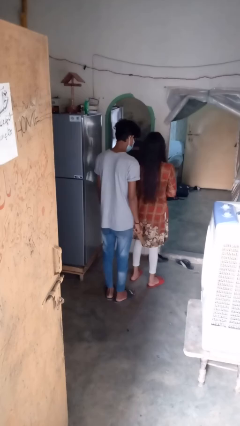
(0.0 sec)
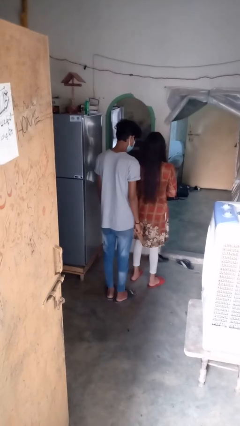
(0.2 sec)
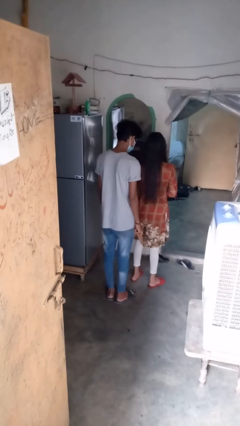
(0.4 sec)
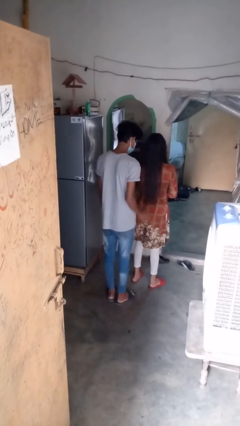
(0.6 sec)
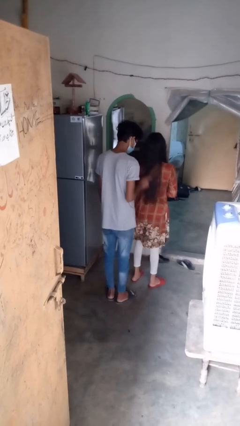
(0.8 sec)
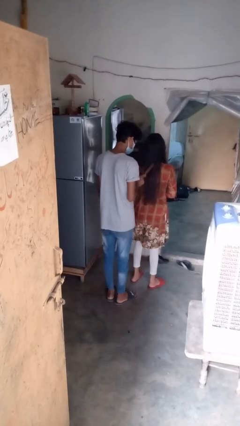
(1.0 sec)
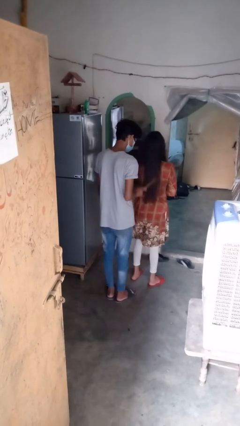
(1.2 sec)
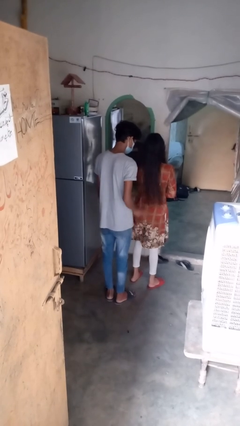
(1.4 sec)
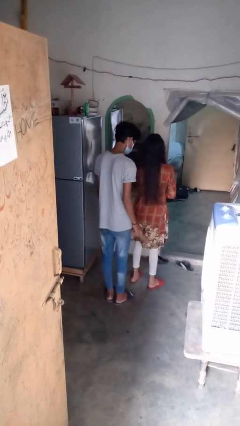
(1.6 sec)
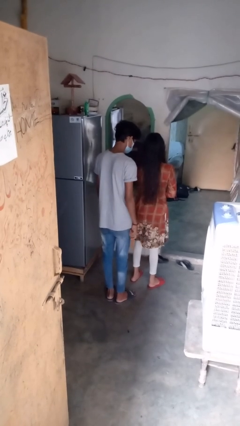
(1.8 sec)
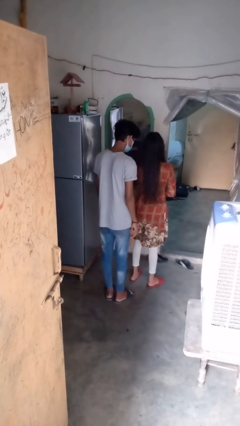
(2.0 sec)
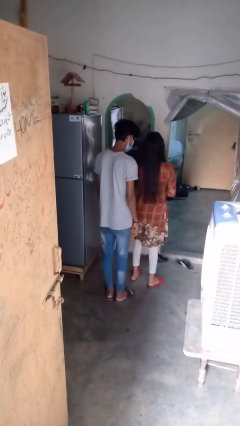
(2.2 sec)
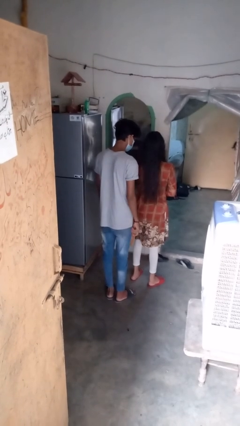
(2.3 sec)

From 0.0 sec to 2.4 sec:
person brushes hair of person

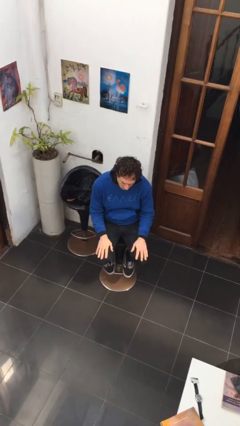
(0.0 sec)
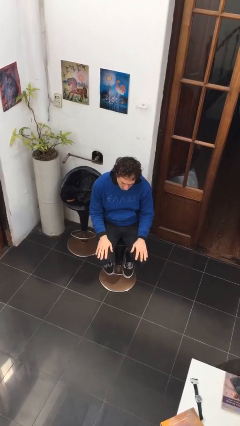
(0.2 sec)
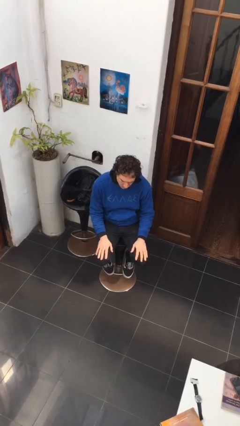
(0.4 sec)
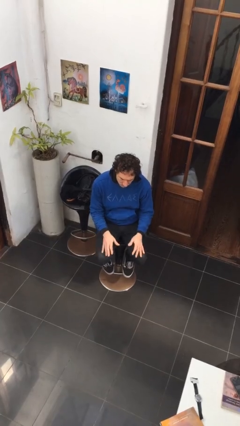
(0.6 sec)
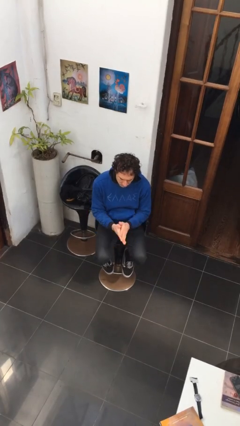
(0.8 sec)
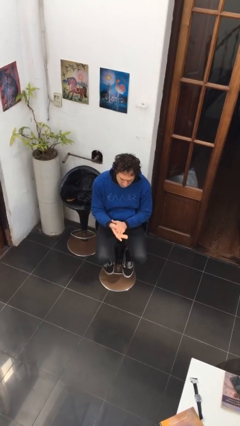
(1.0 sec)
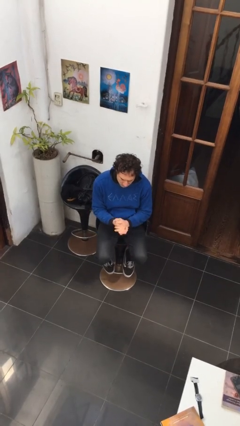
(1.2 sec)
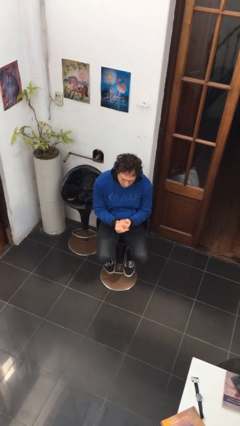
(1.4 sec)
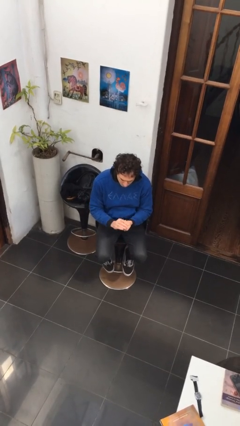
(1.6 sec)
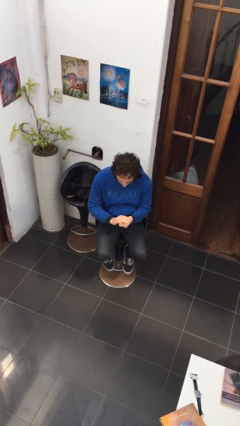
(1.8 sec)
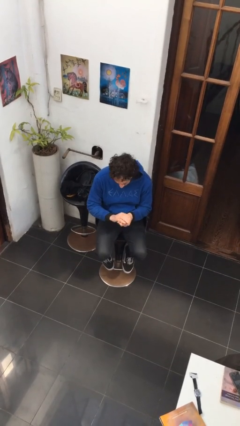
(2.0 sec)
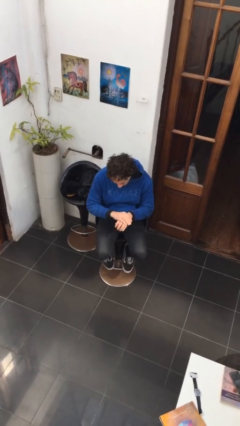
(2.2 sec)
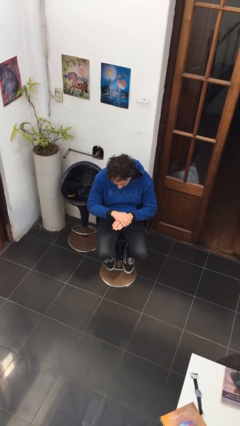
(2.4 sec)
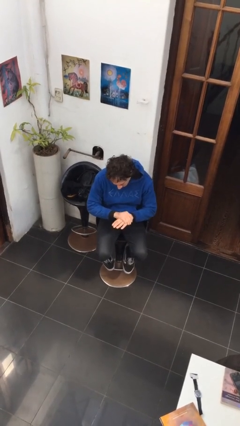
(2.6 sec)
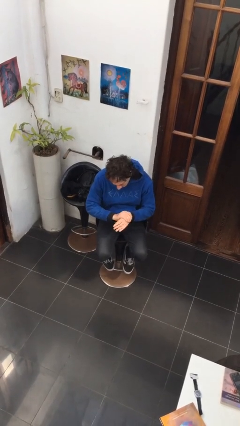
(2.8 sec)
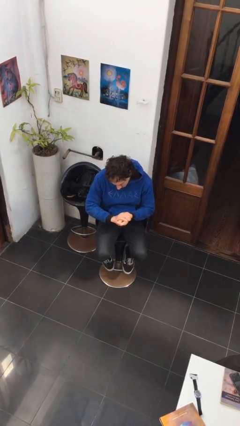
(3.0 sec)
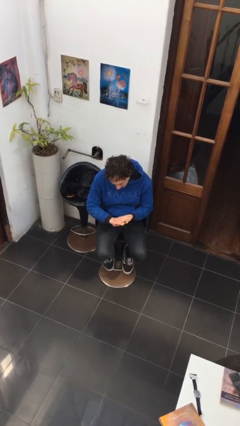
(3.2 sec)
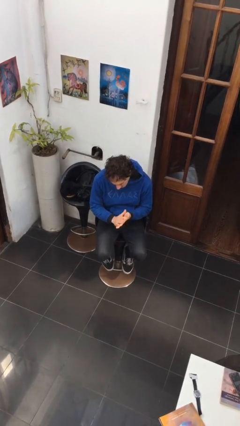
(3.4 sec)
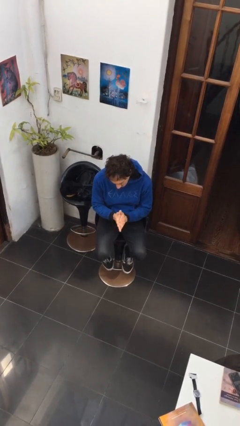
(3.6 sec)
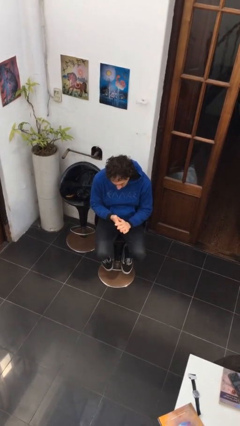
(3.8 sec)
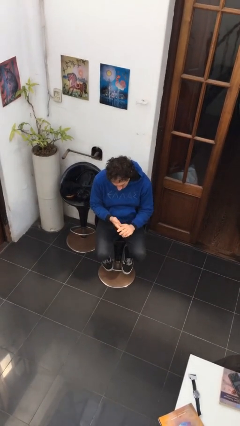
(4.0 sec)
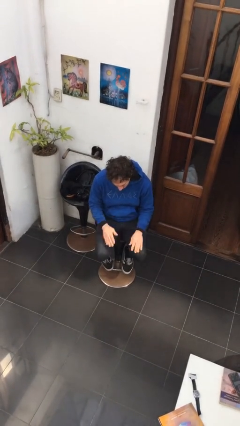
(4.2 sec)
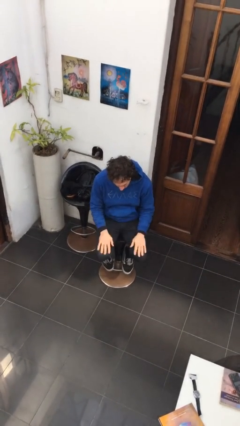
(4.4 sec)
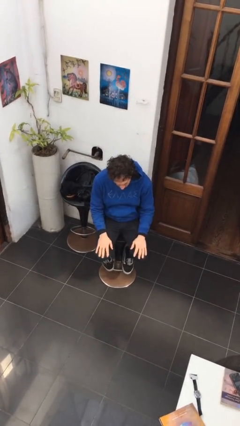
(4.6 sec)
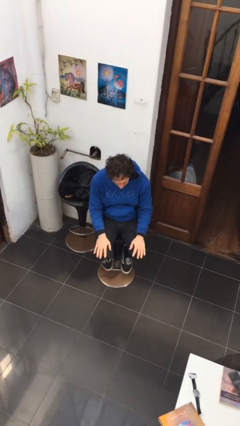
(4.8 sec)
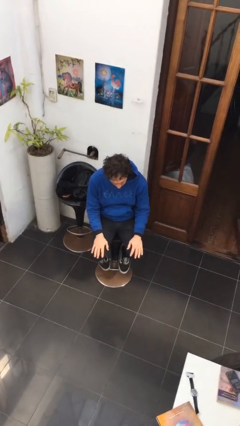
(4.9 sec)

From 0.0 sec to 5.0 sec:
person looks at hands in lap

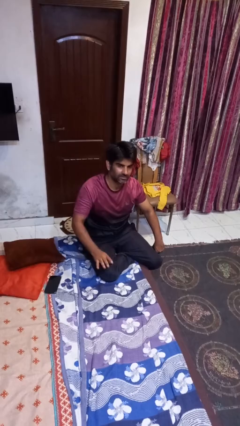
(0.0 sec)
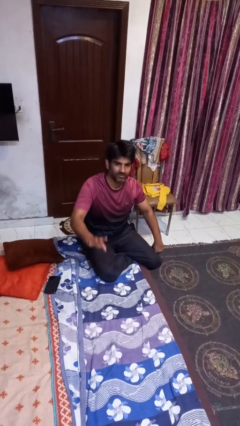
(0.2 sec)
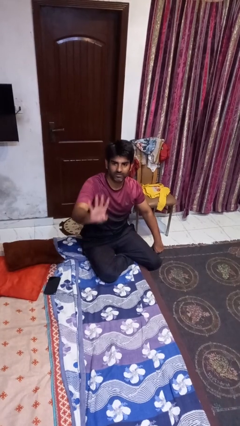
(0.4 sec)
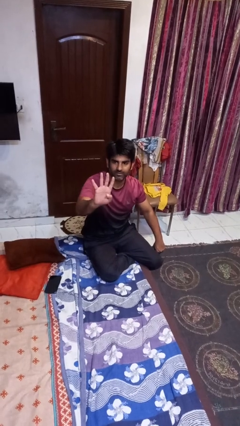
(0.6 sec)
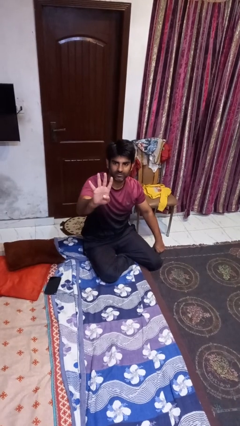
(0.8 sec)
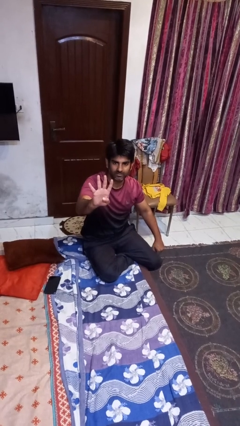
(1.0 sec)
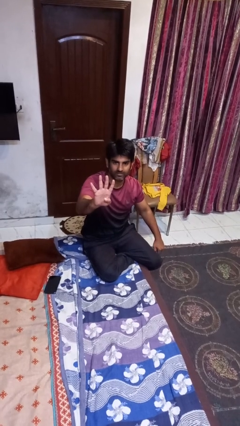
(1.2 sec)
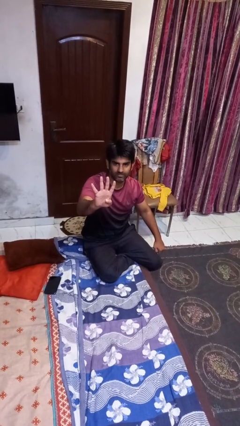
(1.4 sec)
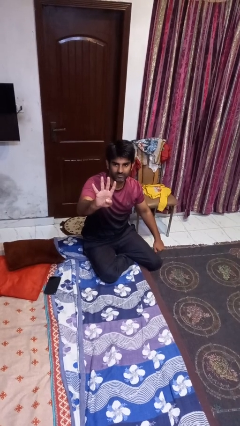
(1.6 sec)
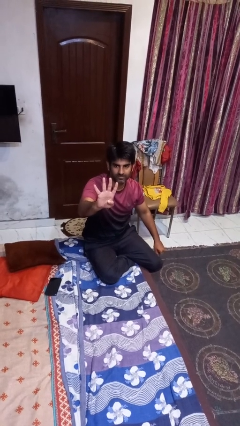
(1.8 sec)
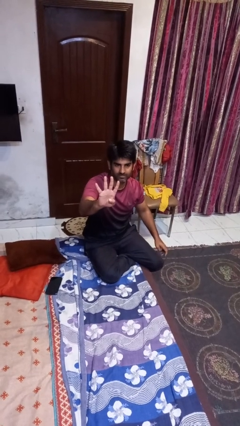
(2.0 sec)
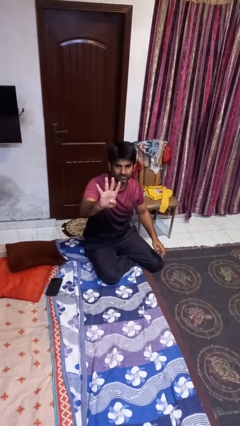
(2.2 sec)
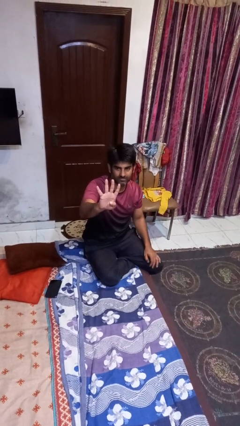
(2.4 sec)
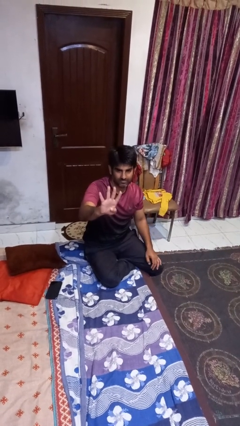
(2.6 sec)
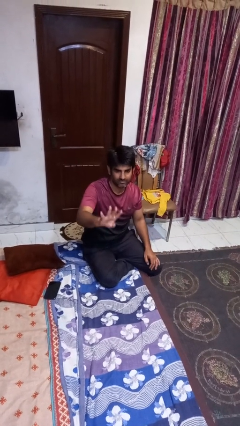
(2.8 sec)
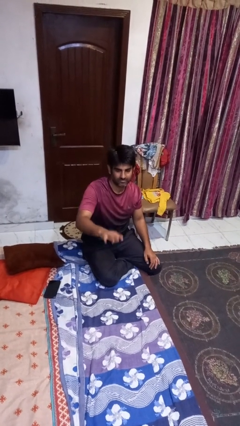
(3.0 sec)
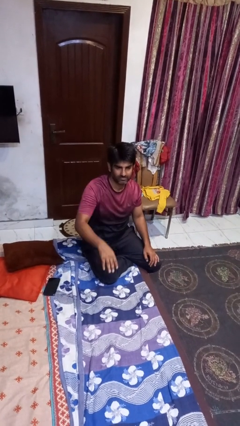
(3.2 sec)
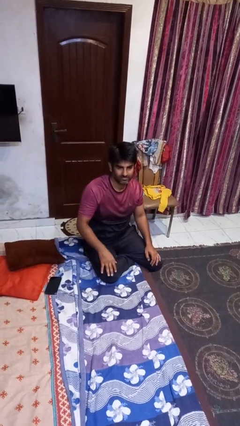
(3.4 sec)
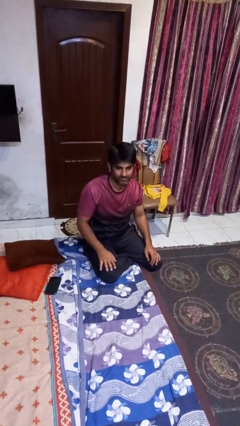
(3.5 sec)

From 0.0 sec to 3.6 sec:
person gestures number four

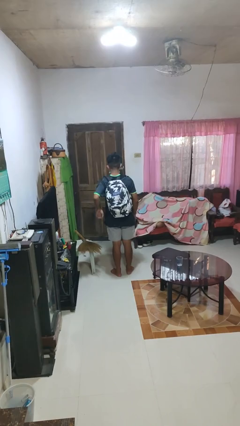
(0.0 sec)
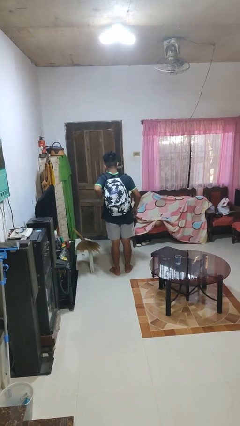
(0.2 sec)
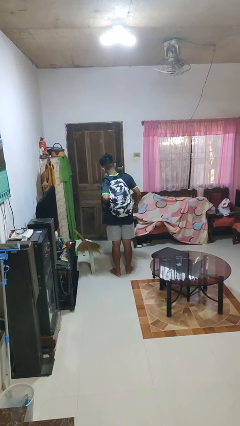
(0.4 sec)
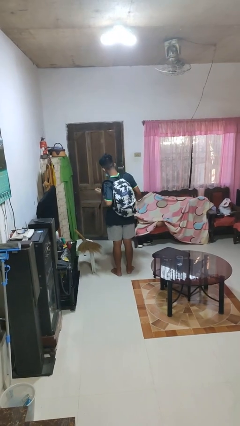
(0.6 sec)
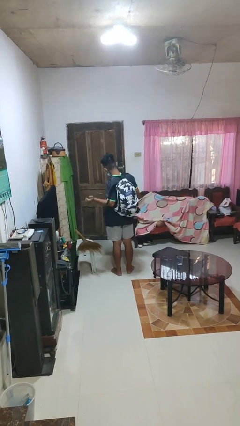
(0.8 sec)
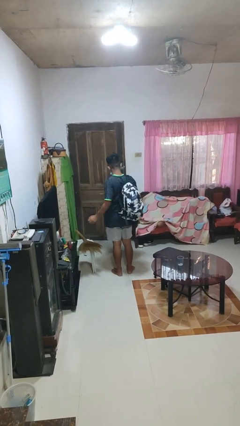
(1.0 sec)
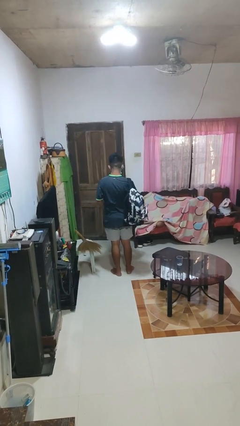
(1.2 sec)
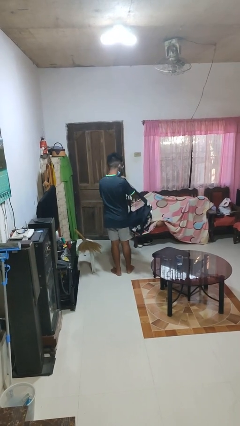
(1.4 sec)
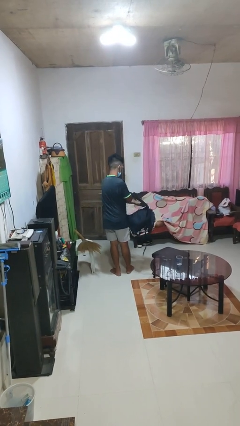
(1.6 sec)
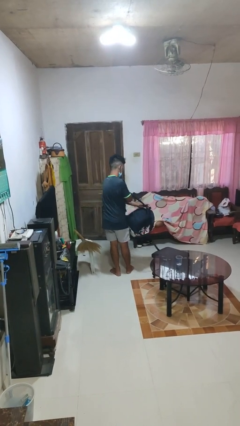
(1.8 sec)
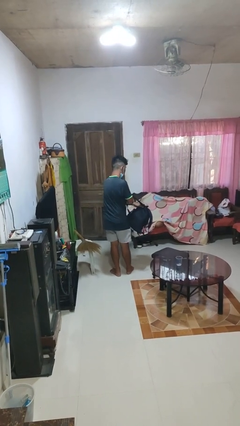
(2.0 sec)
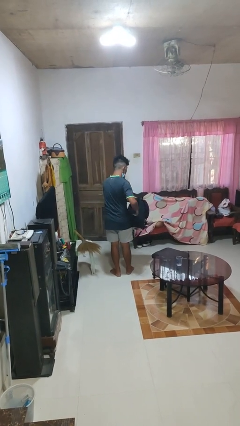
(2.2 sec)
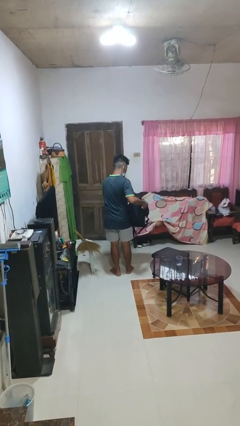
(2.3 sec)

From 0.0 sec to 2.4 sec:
person takes off backpack
